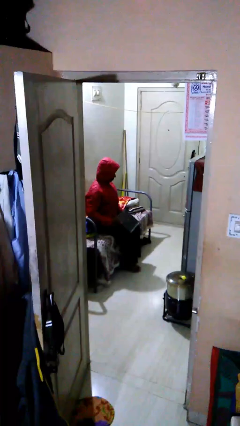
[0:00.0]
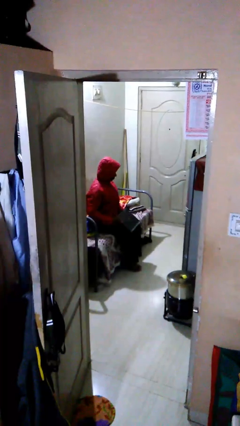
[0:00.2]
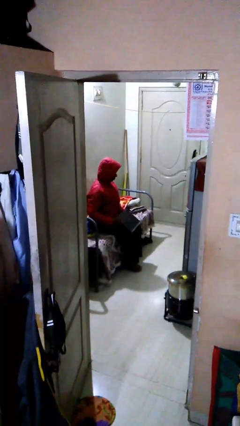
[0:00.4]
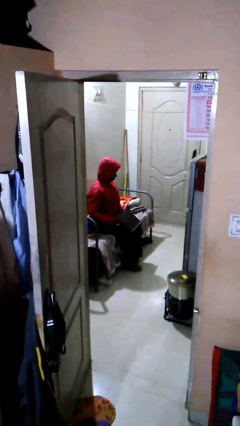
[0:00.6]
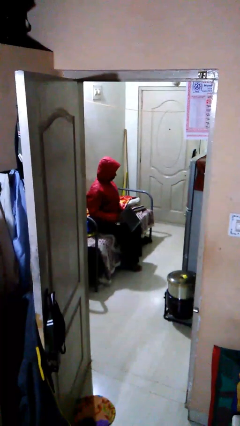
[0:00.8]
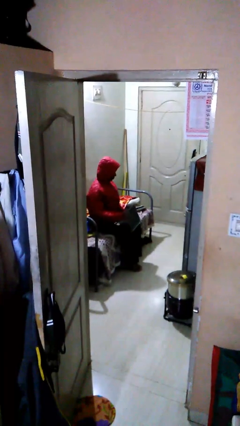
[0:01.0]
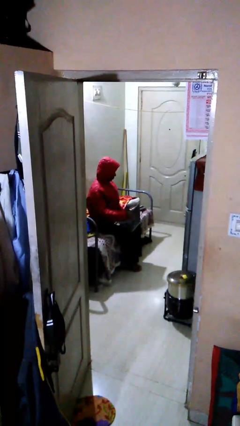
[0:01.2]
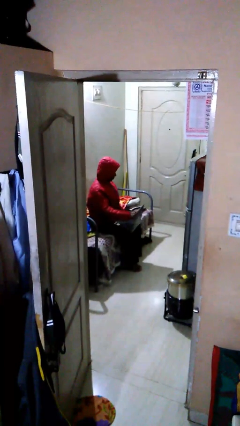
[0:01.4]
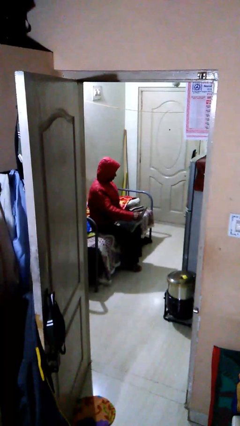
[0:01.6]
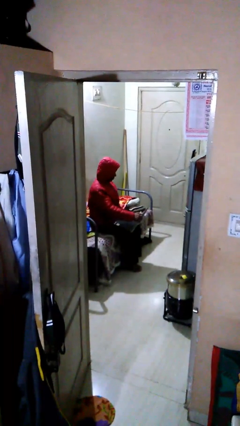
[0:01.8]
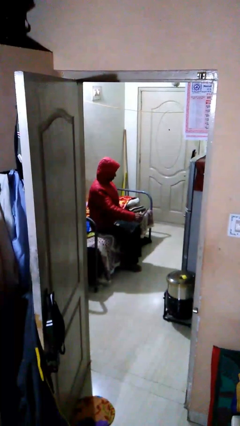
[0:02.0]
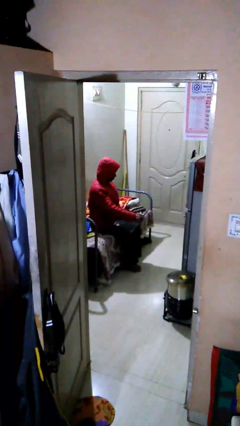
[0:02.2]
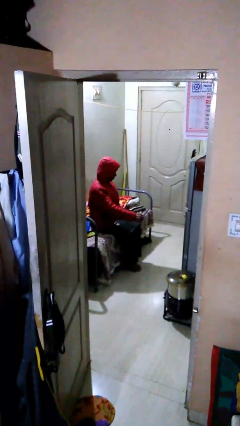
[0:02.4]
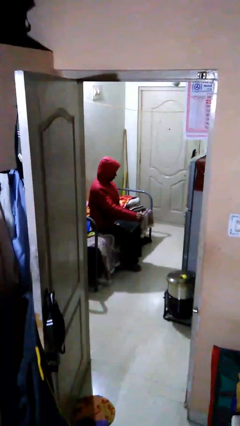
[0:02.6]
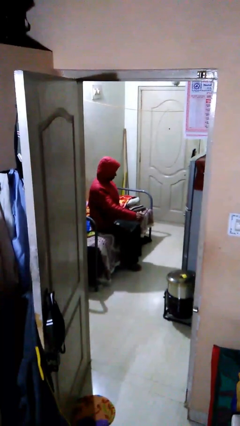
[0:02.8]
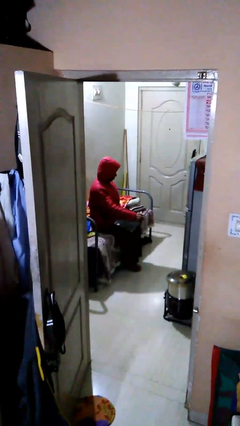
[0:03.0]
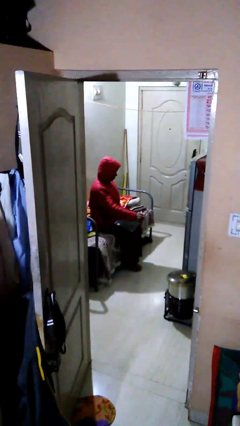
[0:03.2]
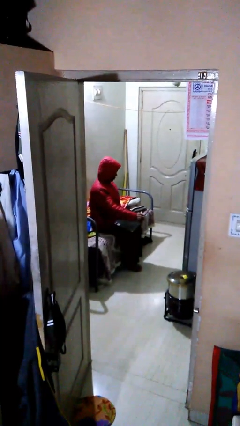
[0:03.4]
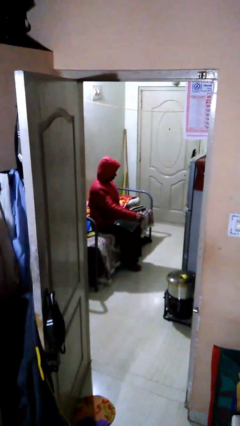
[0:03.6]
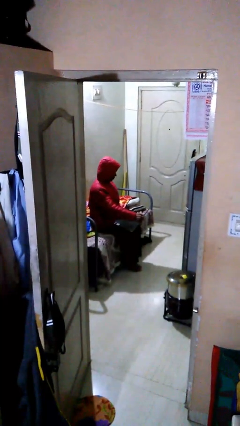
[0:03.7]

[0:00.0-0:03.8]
person interacts with laptop

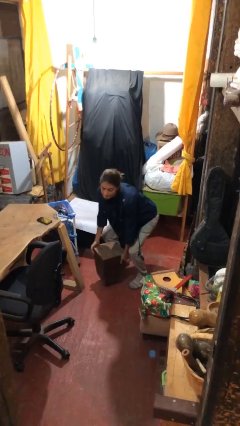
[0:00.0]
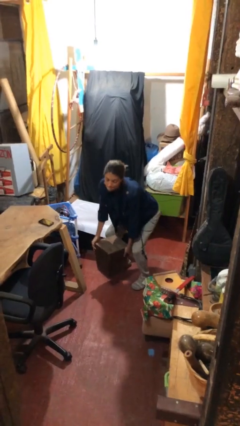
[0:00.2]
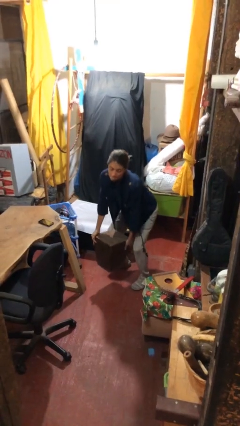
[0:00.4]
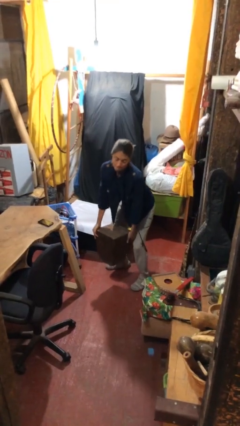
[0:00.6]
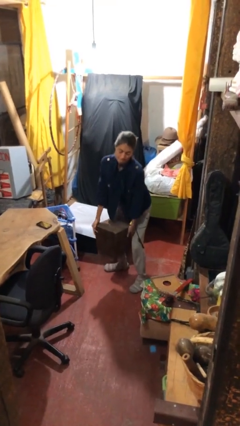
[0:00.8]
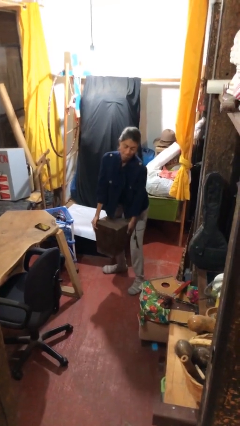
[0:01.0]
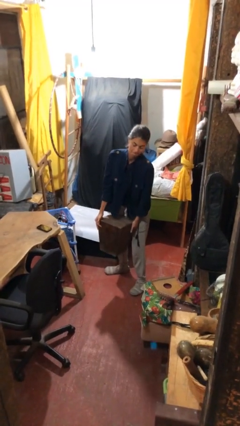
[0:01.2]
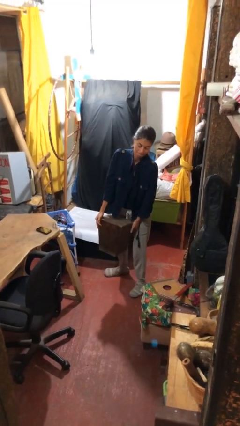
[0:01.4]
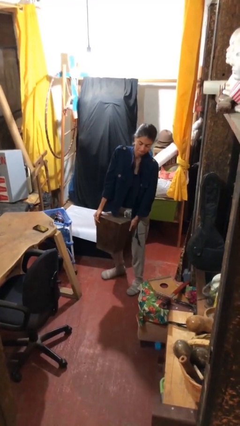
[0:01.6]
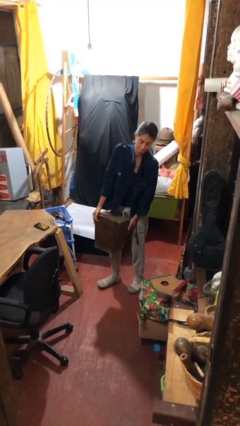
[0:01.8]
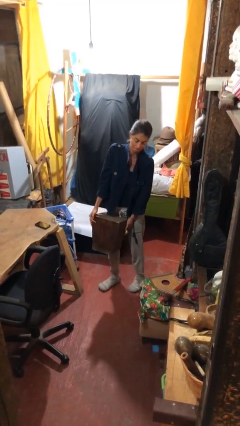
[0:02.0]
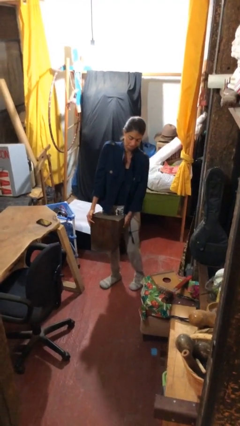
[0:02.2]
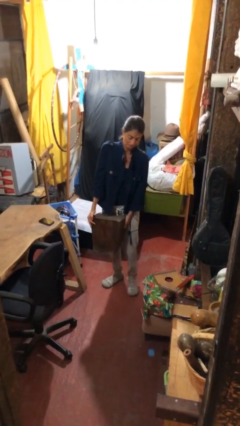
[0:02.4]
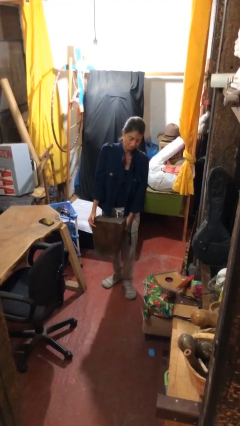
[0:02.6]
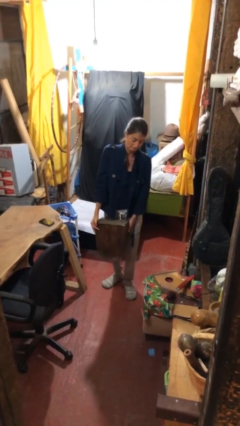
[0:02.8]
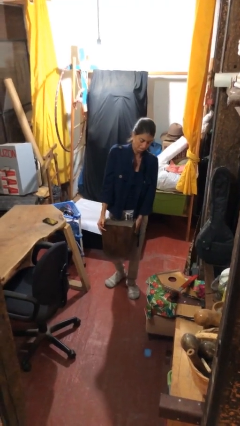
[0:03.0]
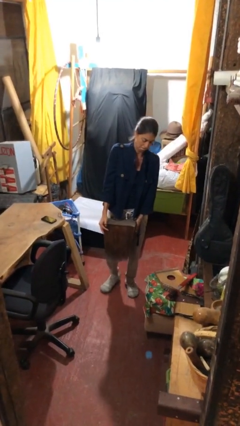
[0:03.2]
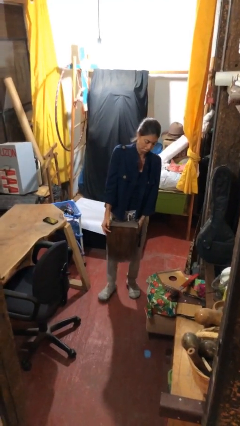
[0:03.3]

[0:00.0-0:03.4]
person carries heavy object

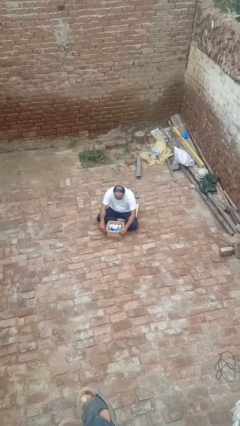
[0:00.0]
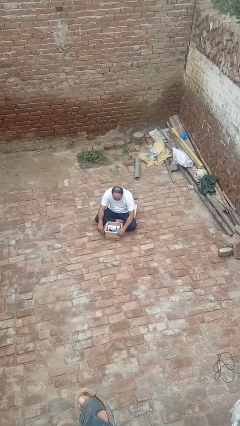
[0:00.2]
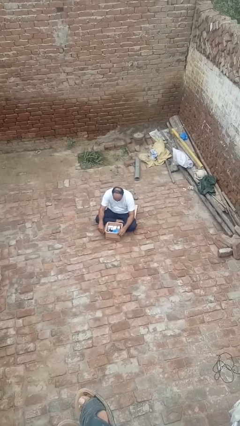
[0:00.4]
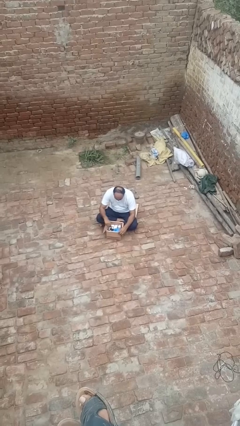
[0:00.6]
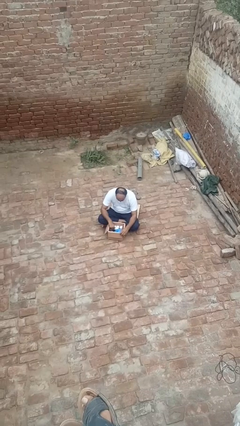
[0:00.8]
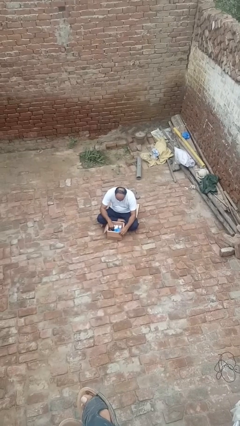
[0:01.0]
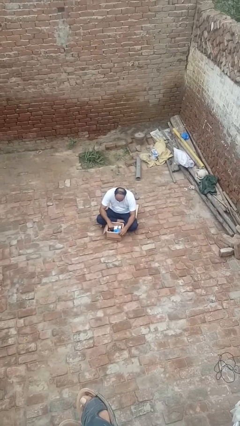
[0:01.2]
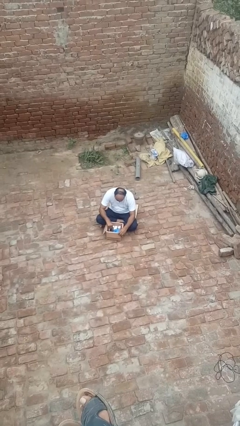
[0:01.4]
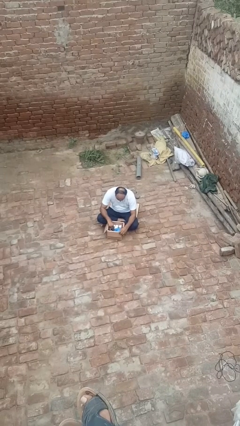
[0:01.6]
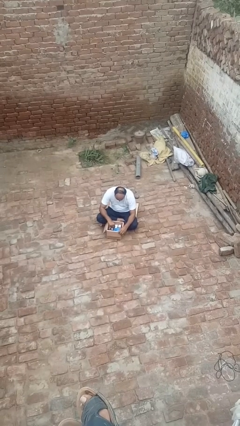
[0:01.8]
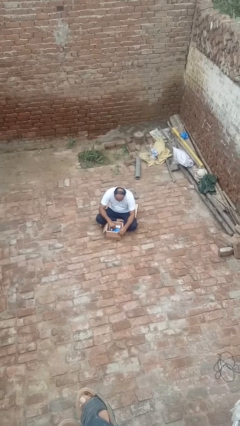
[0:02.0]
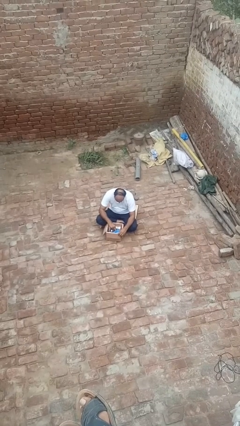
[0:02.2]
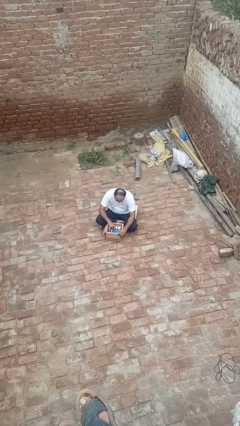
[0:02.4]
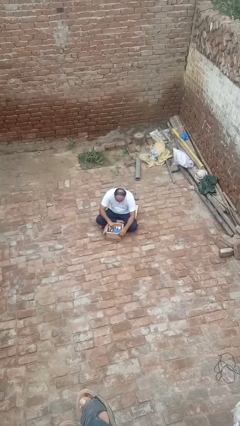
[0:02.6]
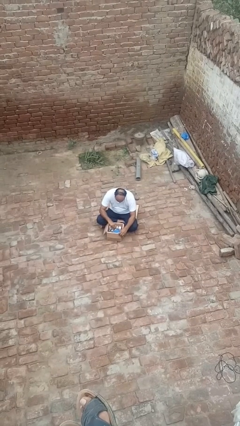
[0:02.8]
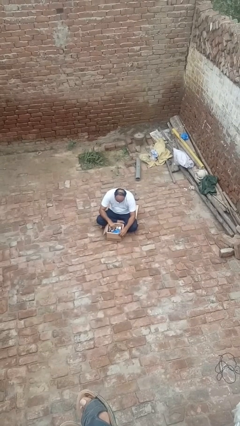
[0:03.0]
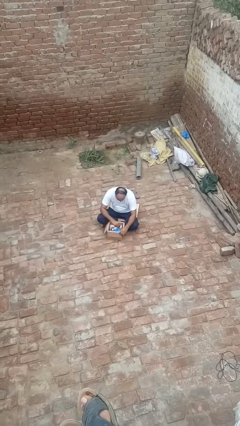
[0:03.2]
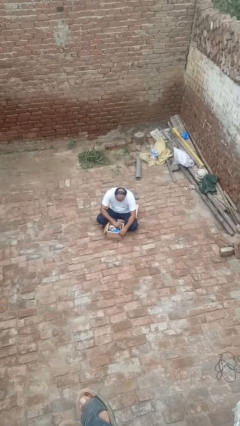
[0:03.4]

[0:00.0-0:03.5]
person searches in box

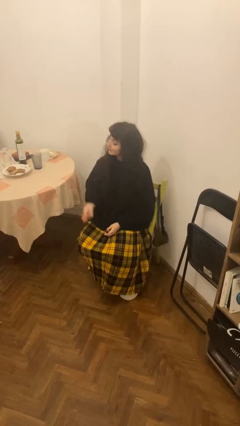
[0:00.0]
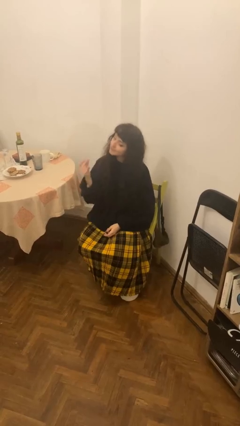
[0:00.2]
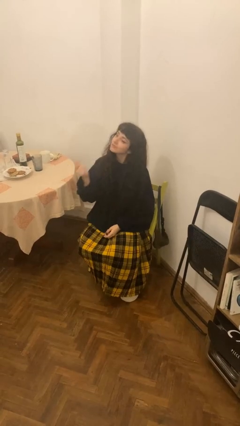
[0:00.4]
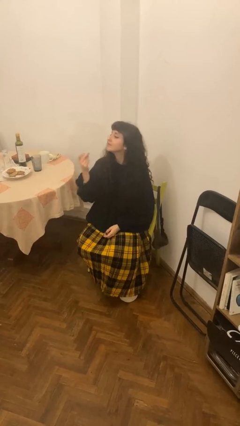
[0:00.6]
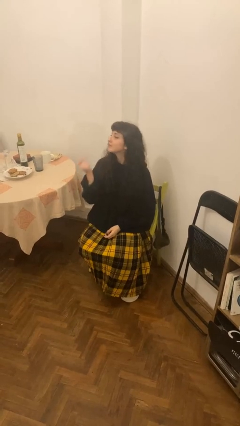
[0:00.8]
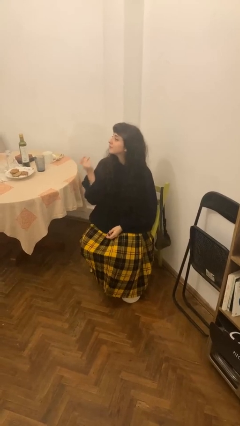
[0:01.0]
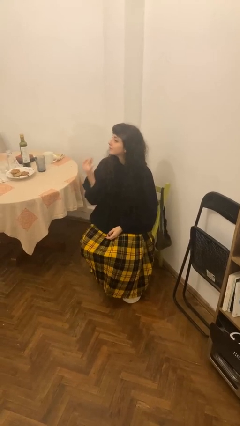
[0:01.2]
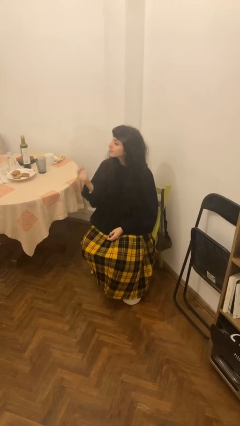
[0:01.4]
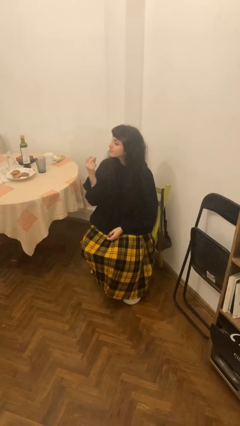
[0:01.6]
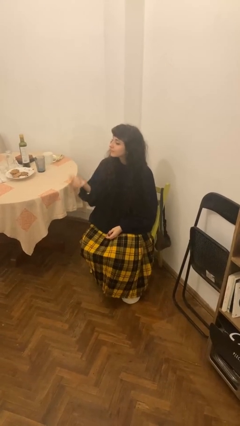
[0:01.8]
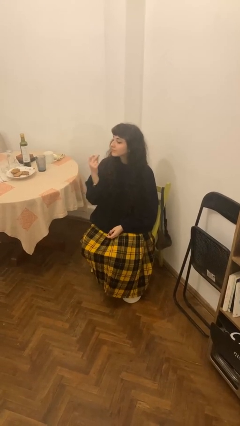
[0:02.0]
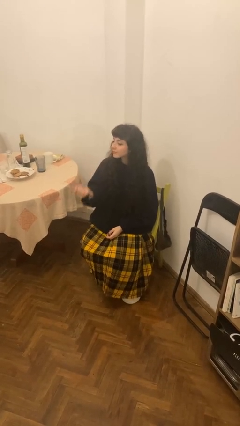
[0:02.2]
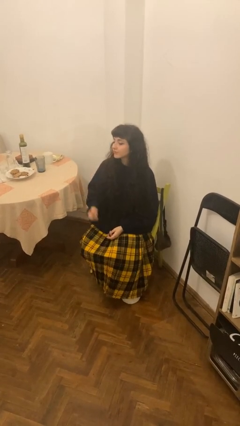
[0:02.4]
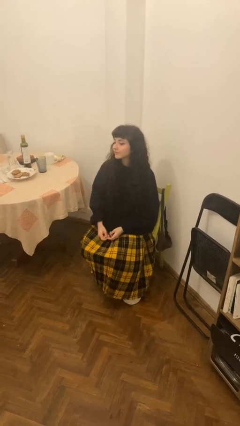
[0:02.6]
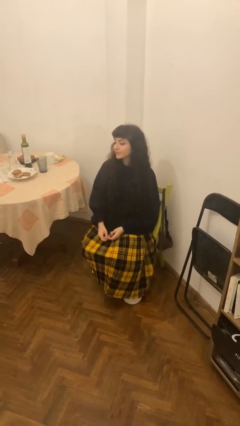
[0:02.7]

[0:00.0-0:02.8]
person snaps fingers

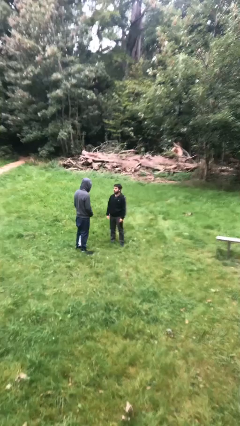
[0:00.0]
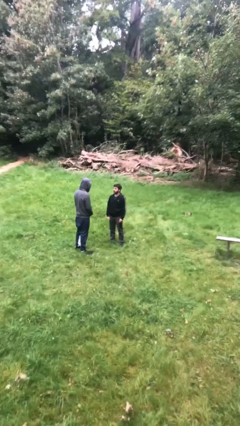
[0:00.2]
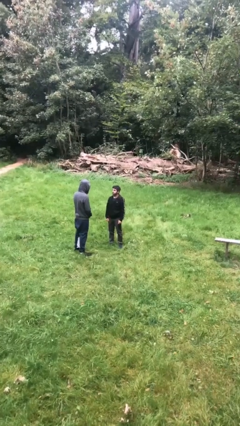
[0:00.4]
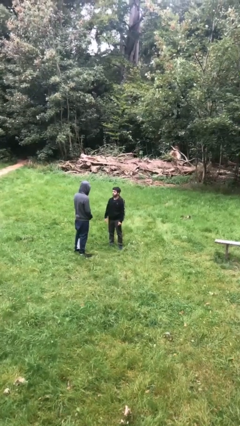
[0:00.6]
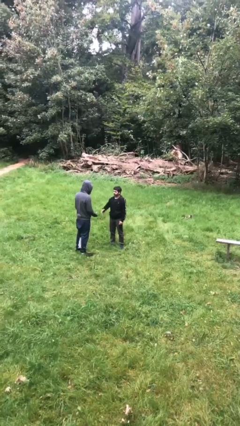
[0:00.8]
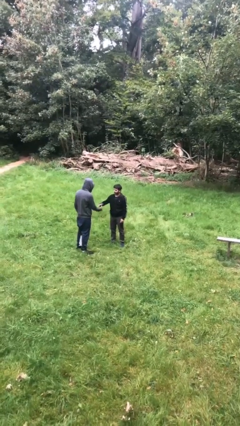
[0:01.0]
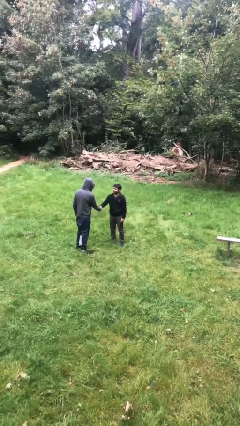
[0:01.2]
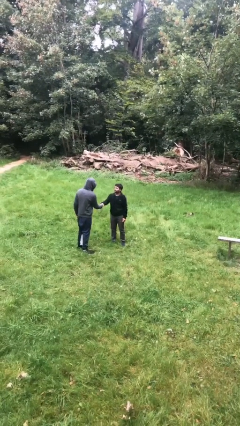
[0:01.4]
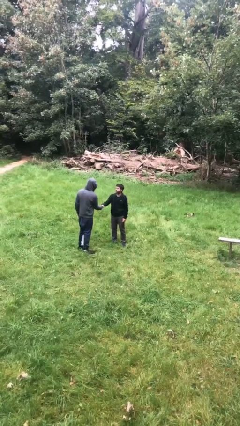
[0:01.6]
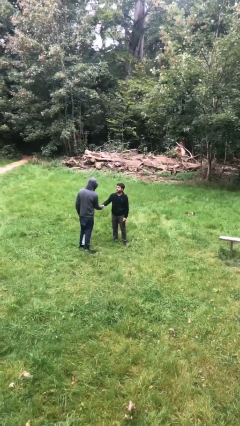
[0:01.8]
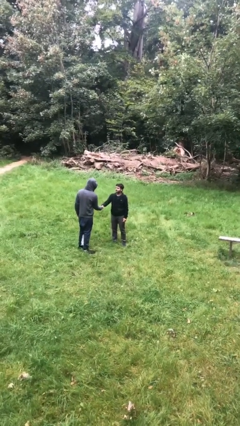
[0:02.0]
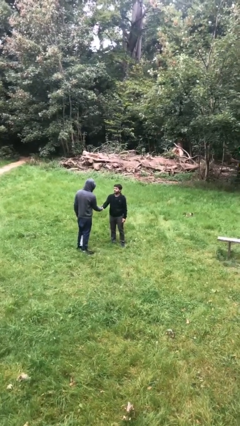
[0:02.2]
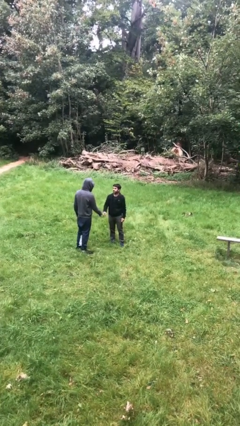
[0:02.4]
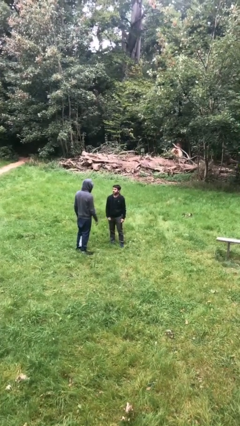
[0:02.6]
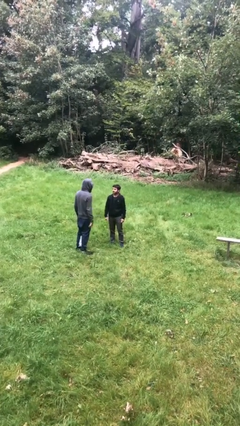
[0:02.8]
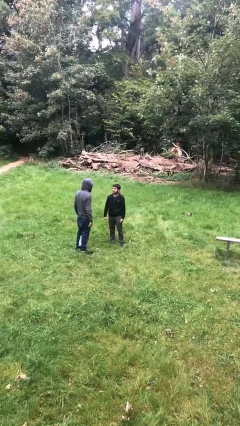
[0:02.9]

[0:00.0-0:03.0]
person shakes hand

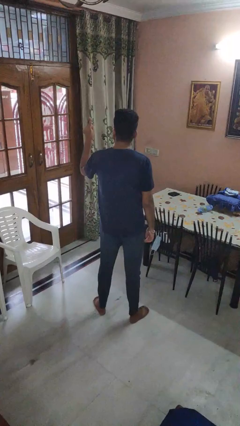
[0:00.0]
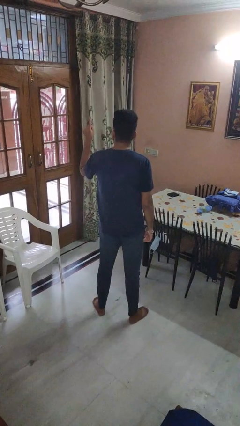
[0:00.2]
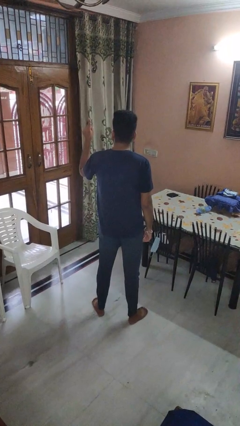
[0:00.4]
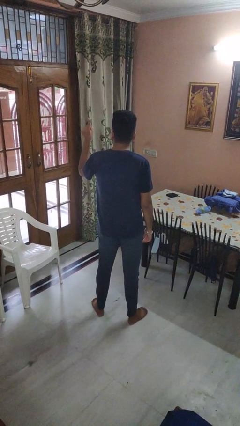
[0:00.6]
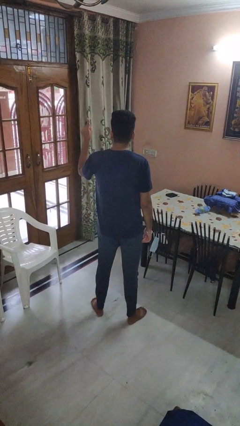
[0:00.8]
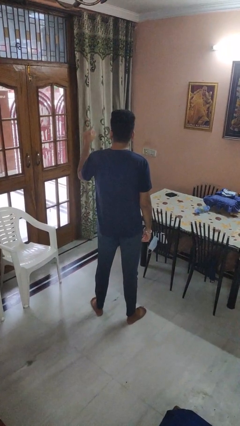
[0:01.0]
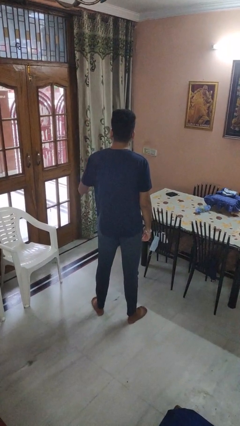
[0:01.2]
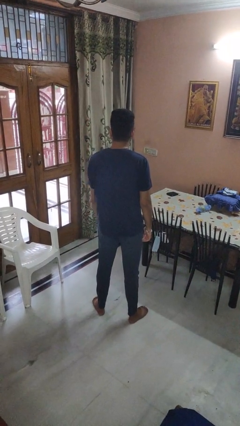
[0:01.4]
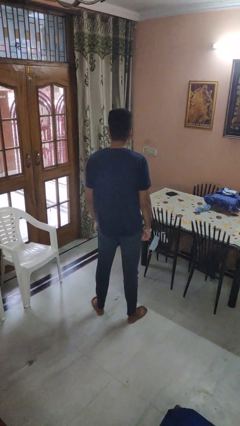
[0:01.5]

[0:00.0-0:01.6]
person gestures number one
